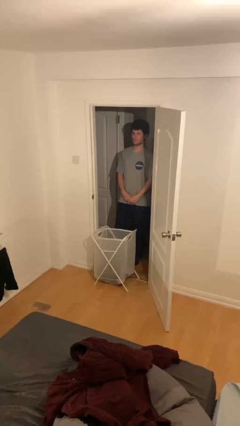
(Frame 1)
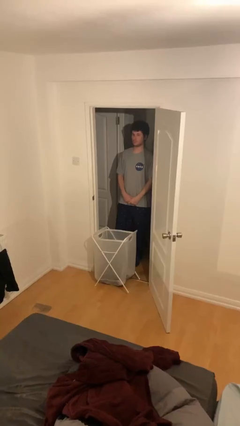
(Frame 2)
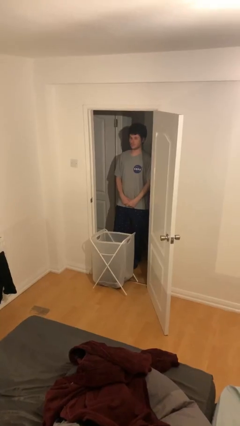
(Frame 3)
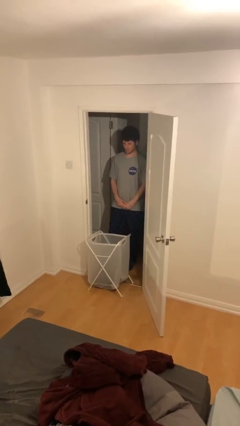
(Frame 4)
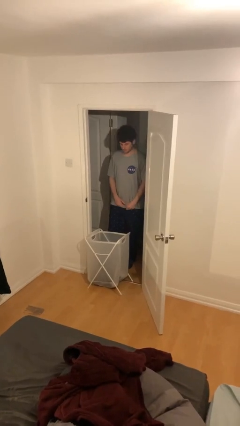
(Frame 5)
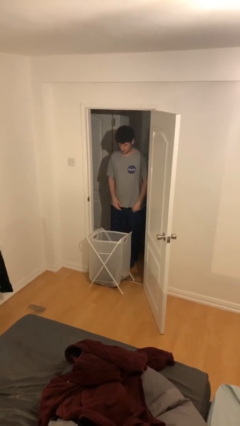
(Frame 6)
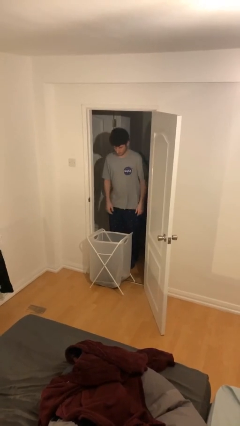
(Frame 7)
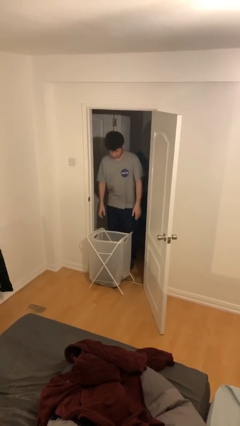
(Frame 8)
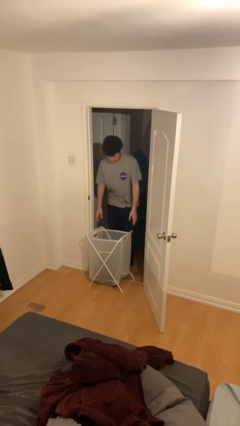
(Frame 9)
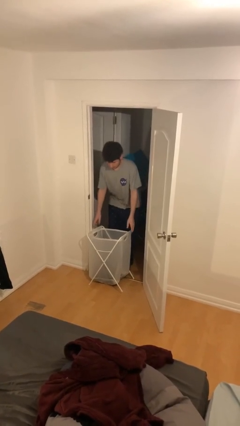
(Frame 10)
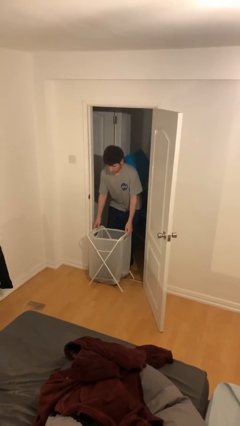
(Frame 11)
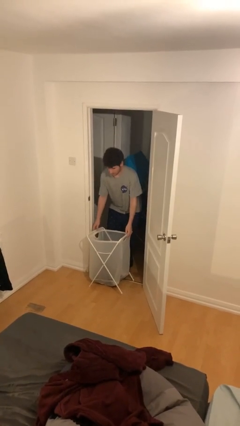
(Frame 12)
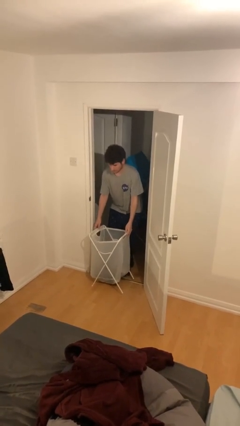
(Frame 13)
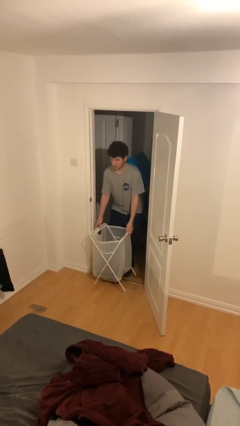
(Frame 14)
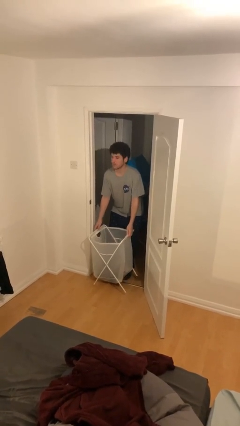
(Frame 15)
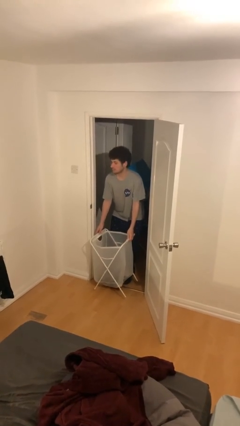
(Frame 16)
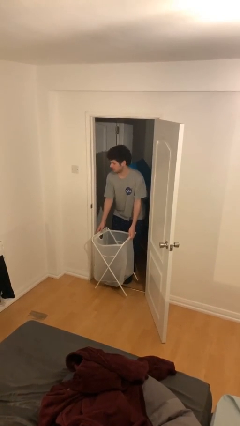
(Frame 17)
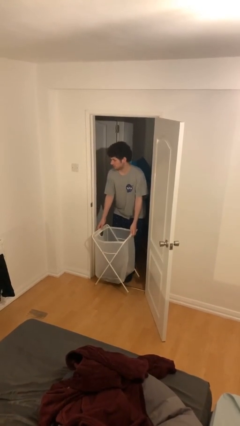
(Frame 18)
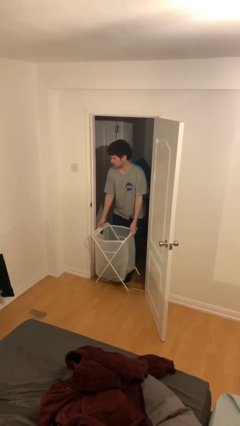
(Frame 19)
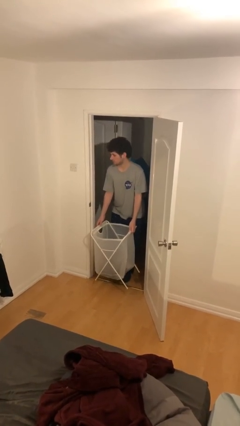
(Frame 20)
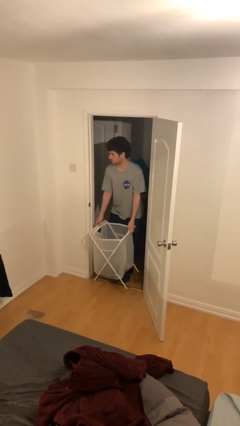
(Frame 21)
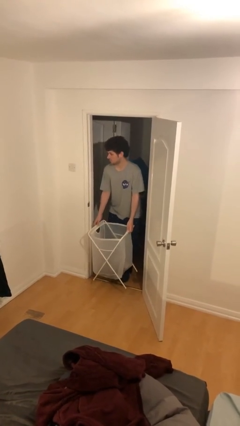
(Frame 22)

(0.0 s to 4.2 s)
person picks up object from floor

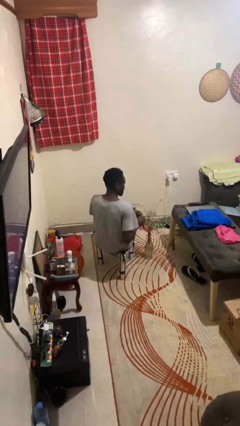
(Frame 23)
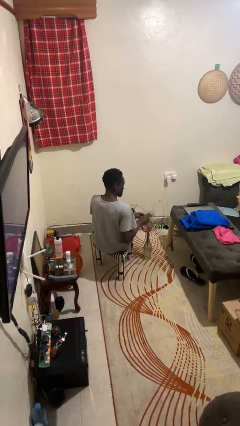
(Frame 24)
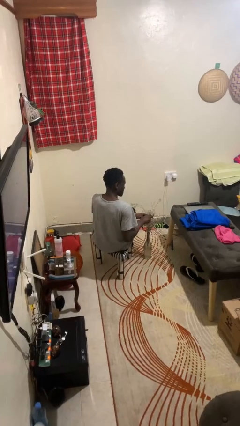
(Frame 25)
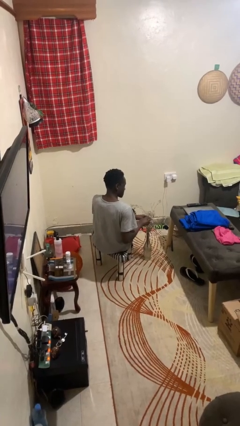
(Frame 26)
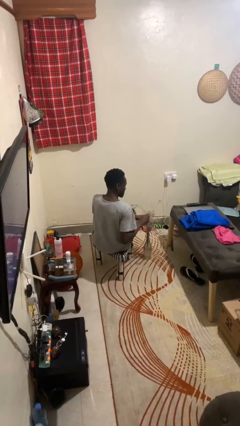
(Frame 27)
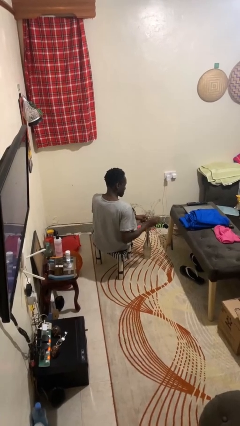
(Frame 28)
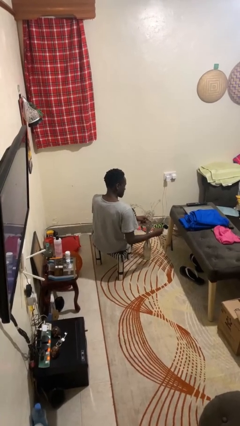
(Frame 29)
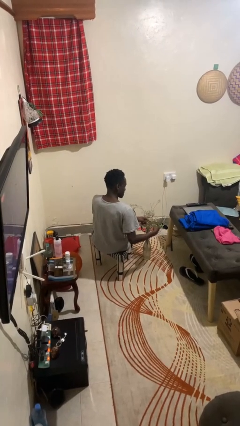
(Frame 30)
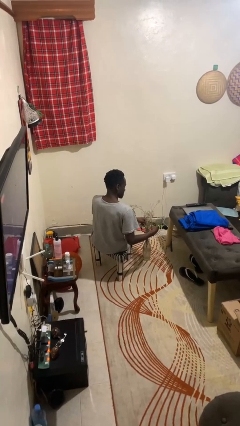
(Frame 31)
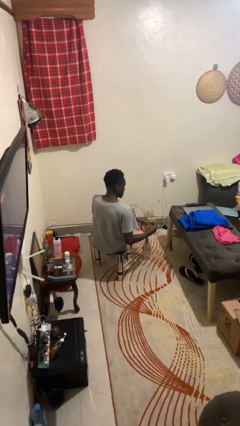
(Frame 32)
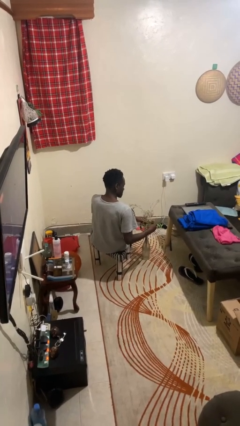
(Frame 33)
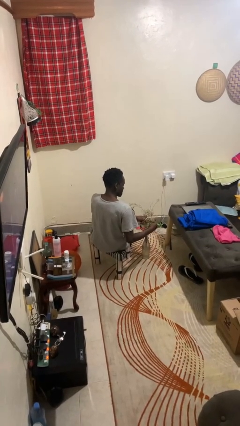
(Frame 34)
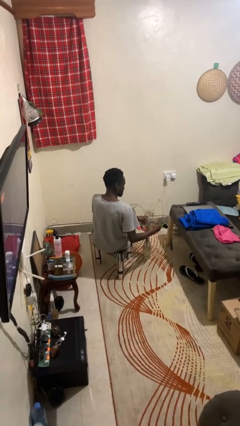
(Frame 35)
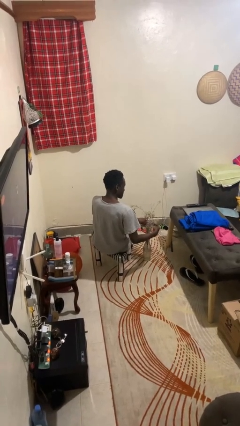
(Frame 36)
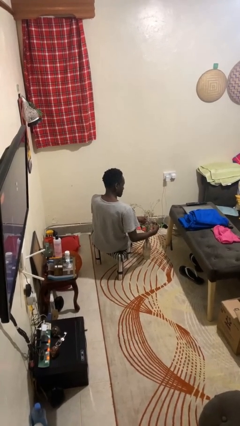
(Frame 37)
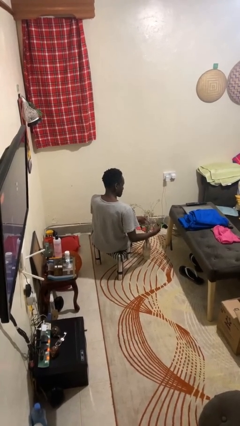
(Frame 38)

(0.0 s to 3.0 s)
person arranges flowers in vase

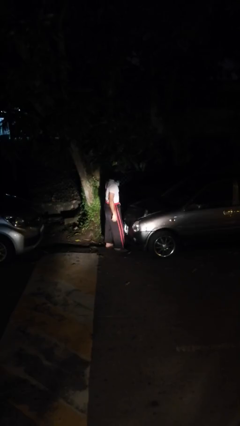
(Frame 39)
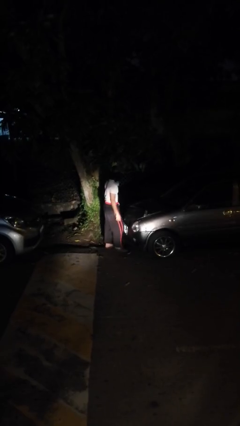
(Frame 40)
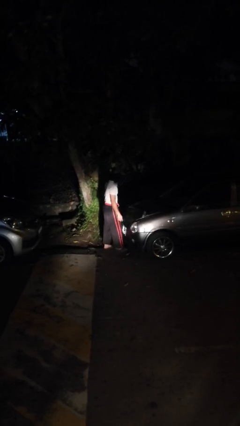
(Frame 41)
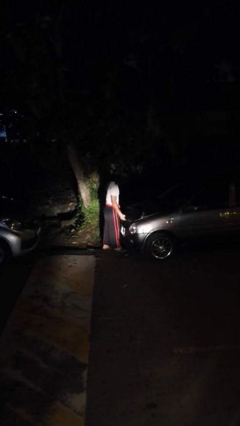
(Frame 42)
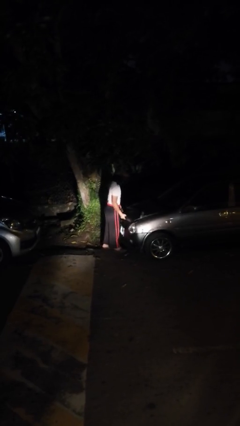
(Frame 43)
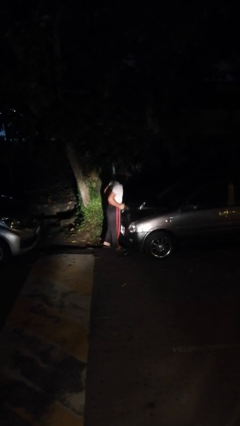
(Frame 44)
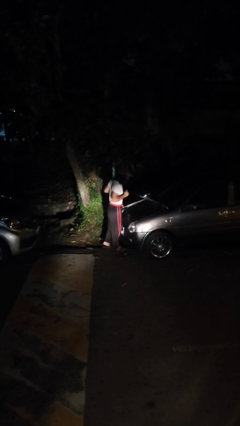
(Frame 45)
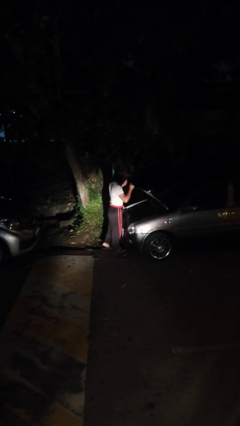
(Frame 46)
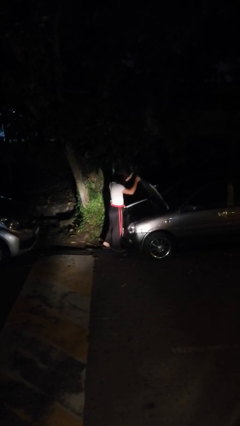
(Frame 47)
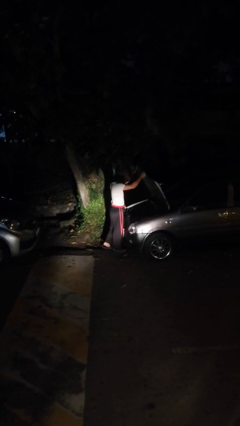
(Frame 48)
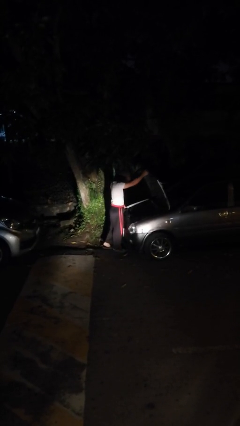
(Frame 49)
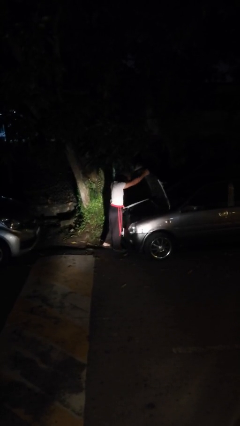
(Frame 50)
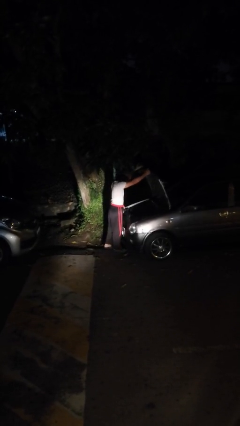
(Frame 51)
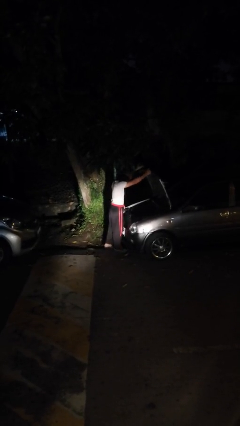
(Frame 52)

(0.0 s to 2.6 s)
person opens car hood

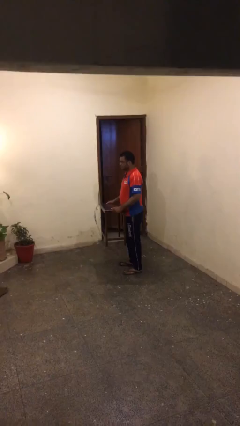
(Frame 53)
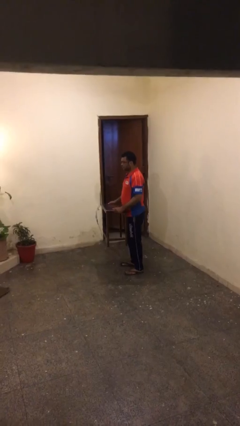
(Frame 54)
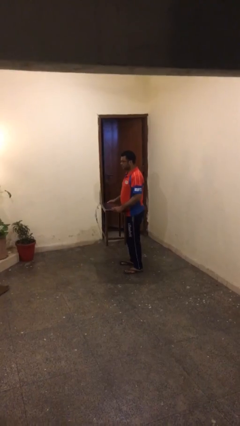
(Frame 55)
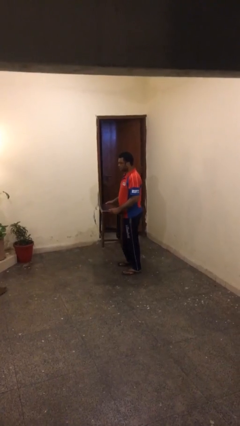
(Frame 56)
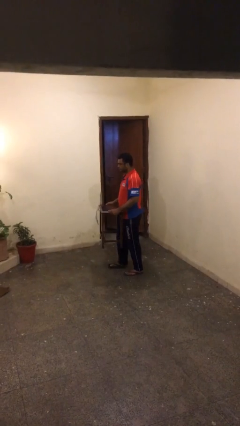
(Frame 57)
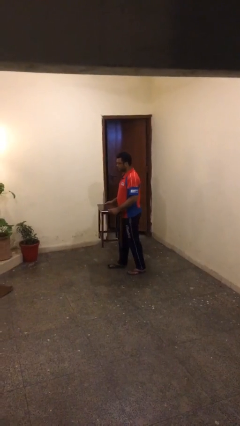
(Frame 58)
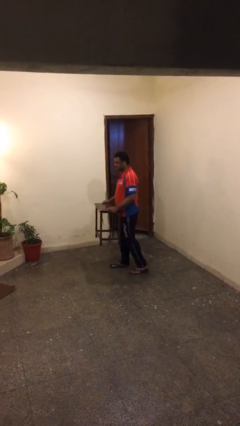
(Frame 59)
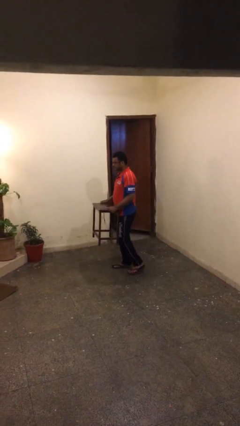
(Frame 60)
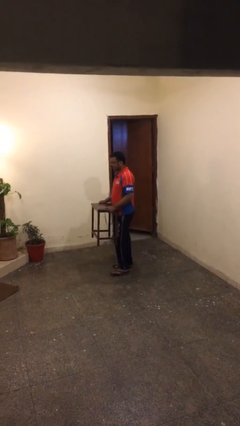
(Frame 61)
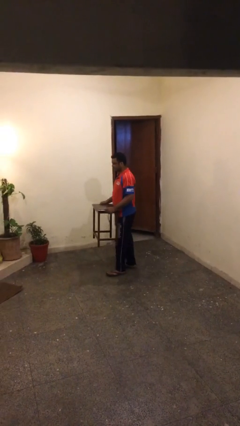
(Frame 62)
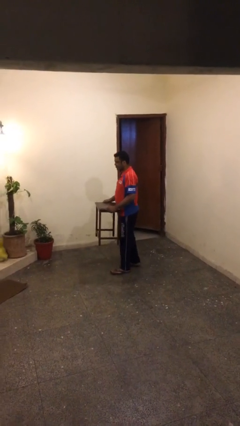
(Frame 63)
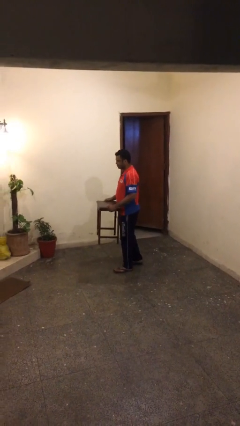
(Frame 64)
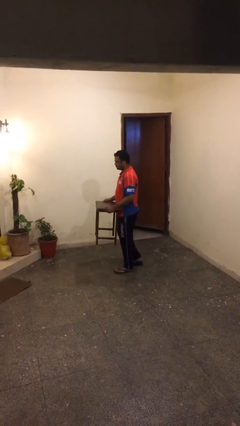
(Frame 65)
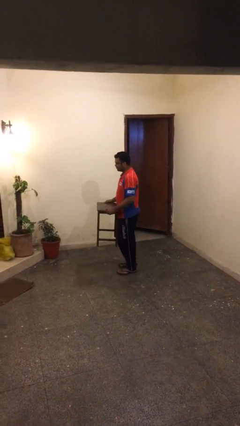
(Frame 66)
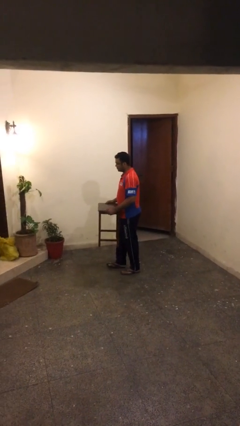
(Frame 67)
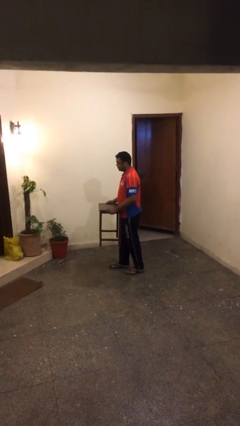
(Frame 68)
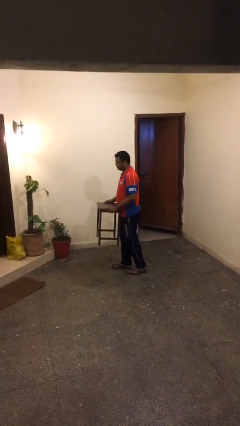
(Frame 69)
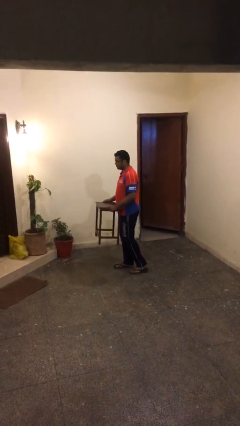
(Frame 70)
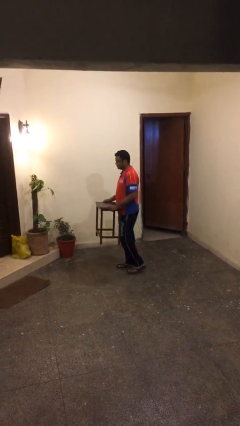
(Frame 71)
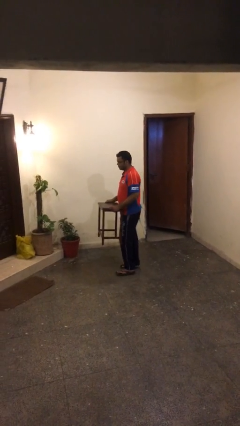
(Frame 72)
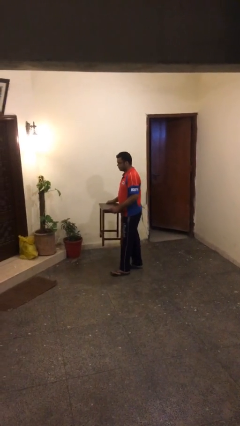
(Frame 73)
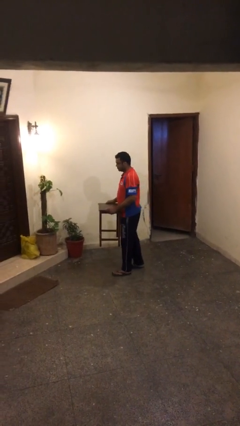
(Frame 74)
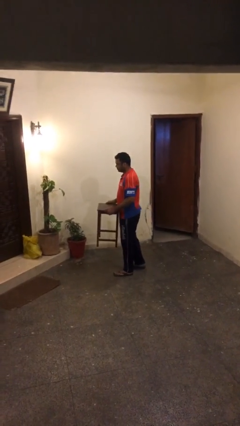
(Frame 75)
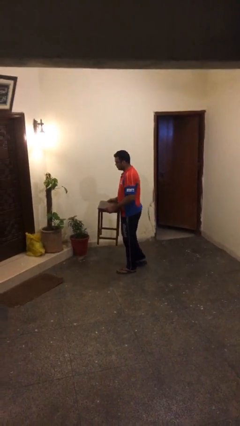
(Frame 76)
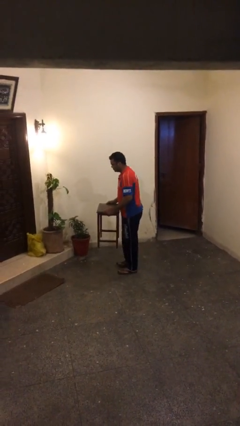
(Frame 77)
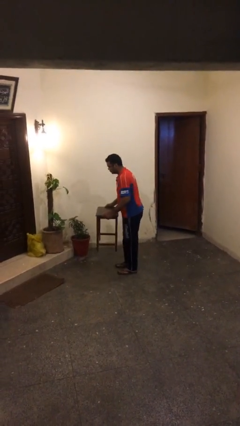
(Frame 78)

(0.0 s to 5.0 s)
person carries heavy object

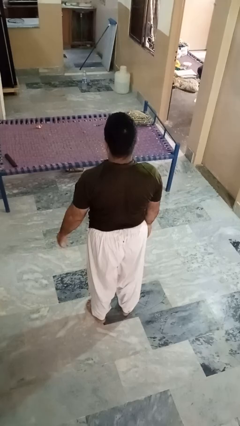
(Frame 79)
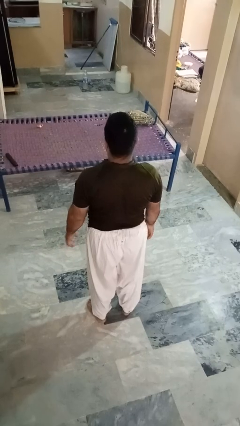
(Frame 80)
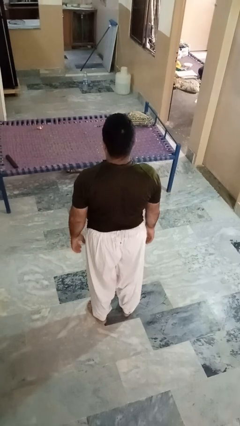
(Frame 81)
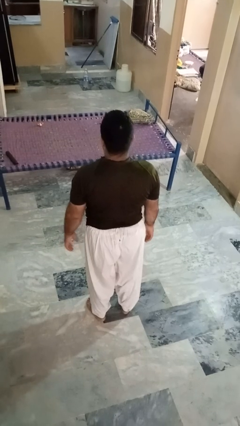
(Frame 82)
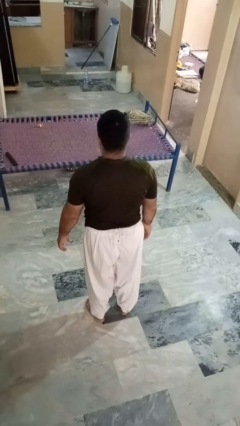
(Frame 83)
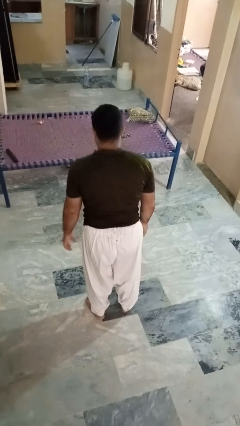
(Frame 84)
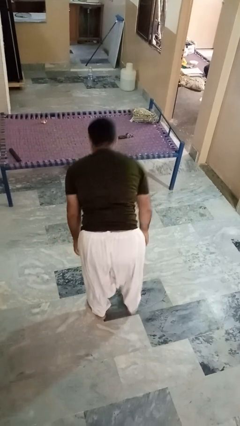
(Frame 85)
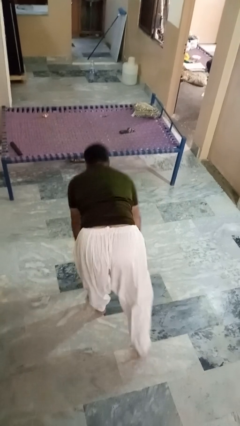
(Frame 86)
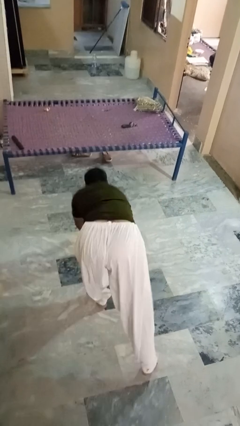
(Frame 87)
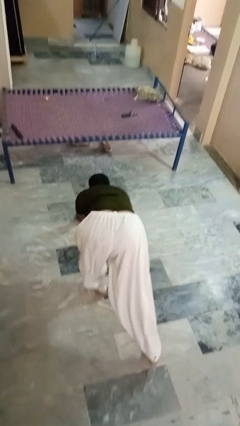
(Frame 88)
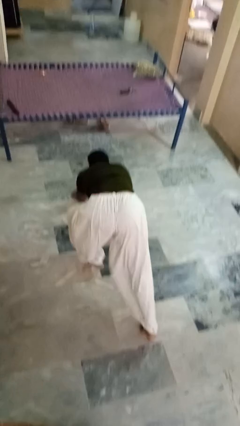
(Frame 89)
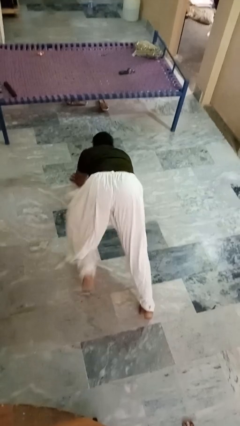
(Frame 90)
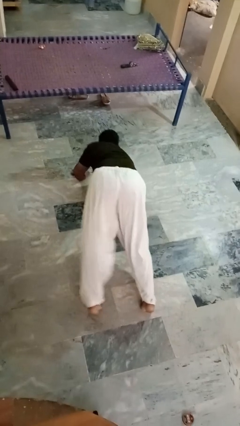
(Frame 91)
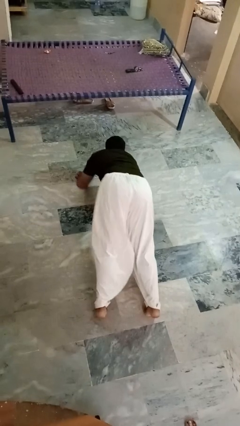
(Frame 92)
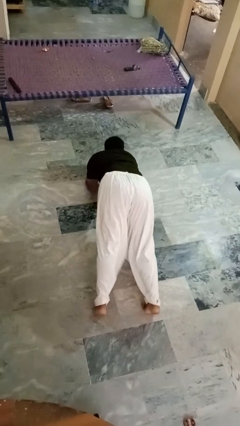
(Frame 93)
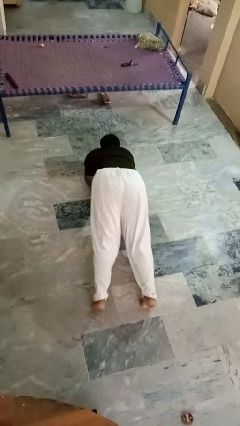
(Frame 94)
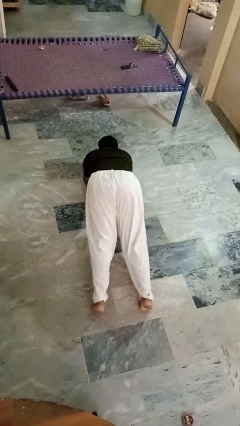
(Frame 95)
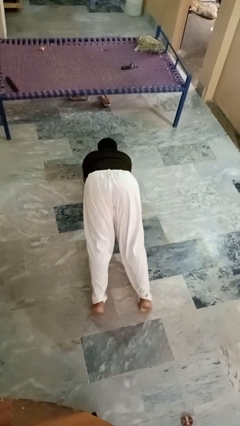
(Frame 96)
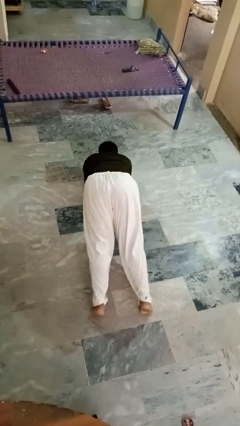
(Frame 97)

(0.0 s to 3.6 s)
person exercises with plank
